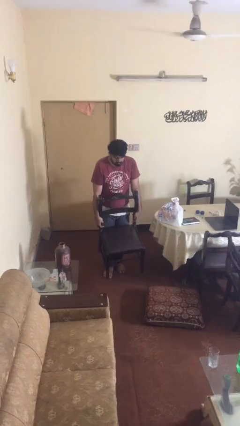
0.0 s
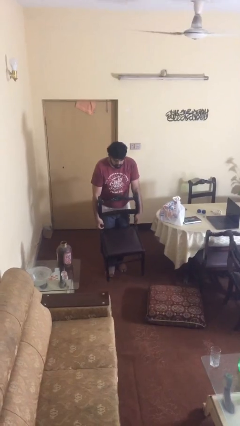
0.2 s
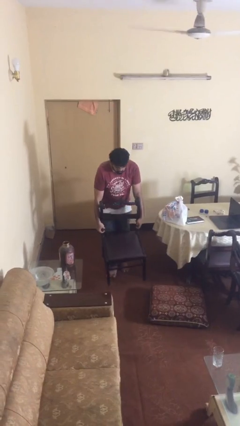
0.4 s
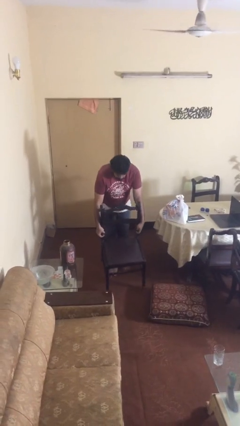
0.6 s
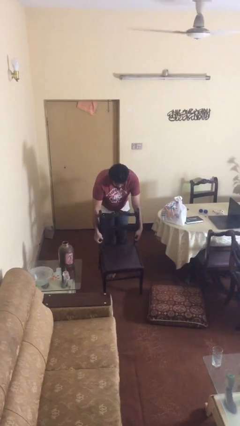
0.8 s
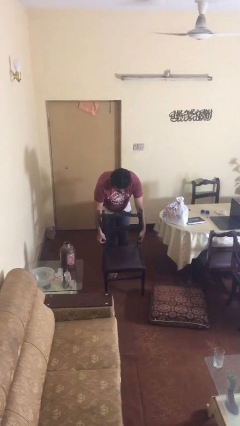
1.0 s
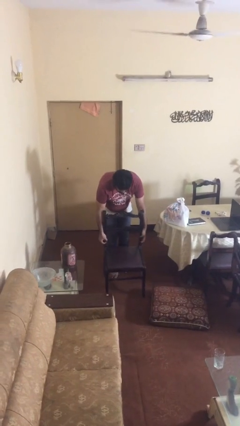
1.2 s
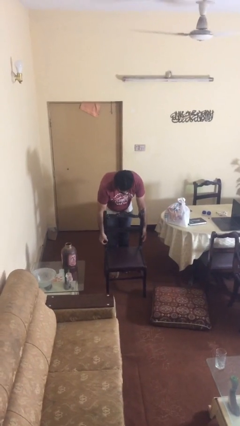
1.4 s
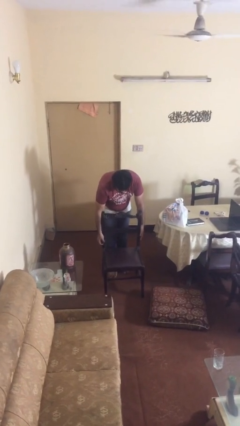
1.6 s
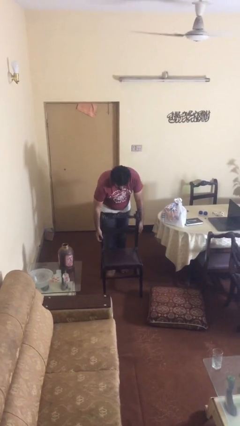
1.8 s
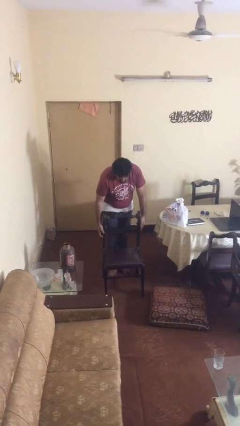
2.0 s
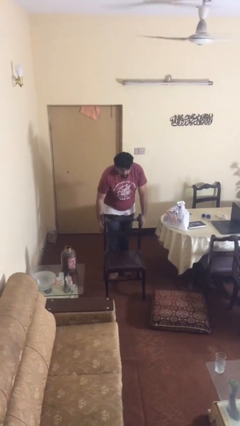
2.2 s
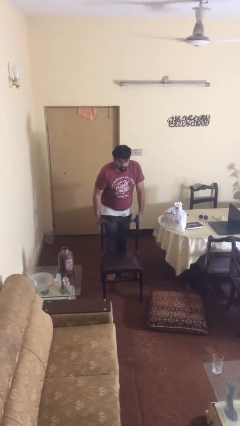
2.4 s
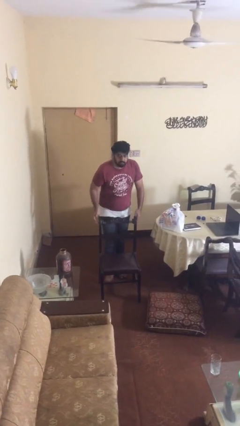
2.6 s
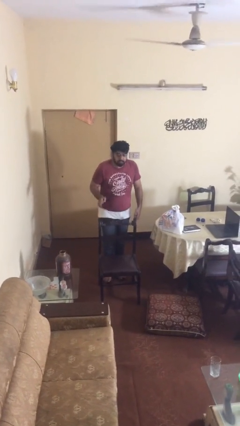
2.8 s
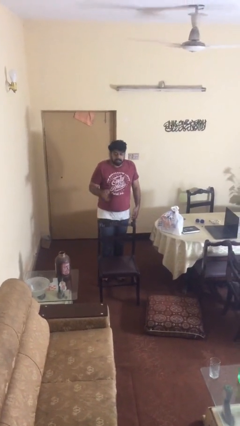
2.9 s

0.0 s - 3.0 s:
person puts down object on floor

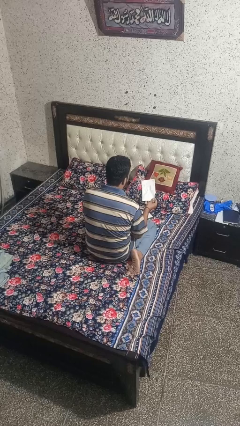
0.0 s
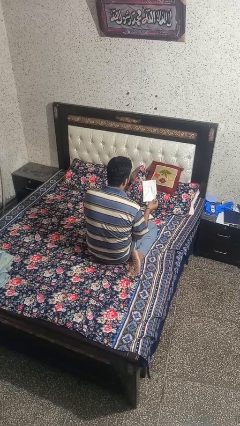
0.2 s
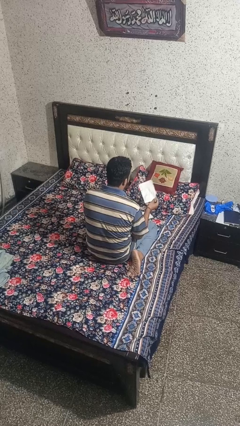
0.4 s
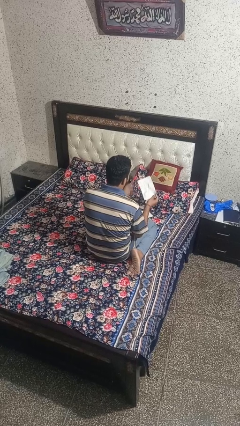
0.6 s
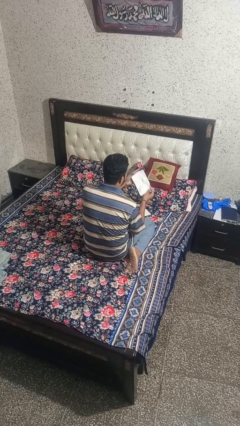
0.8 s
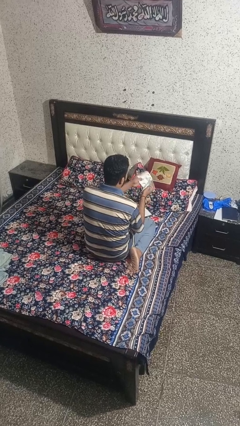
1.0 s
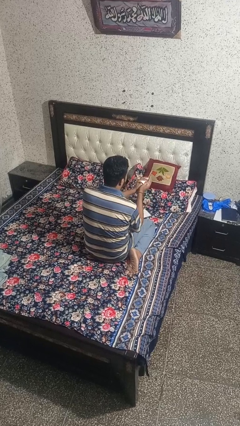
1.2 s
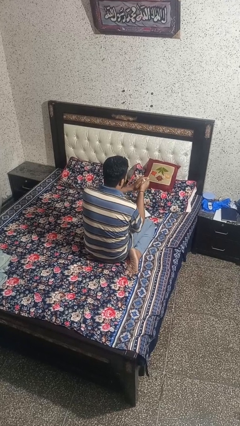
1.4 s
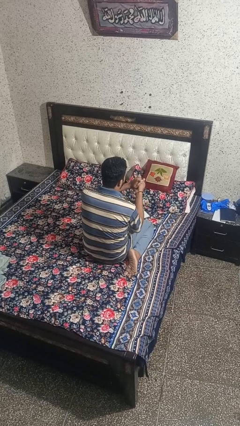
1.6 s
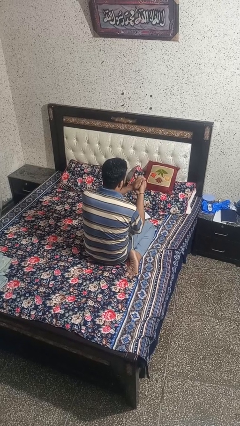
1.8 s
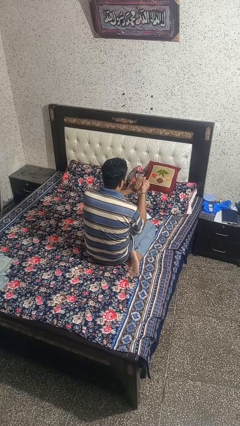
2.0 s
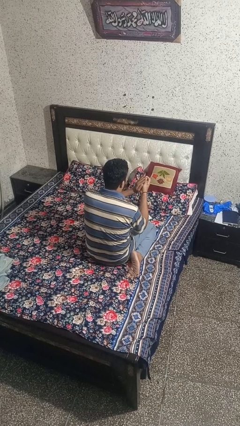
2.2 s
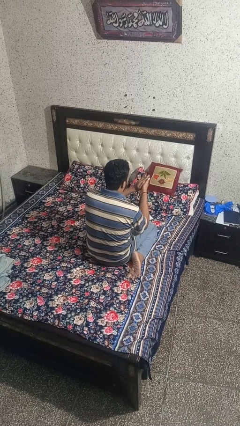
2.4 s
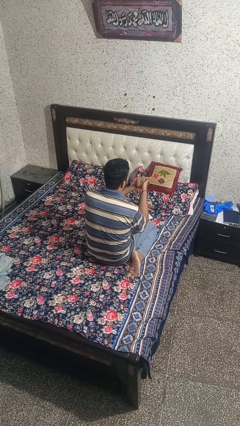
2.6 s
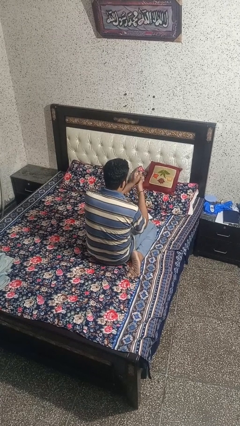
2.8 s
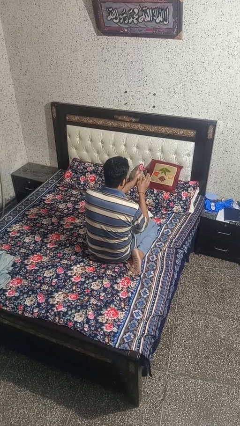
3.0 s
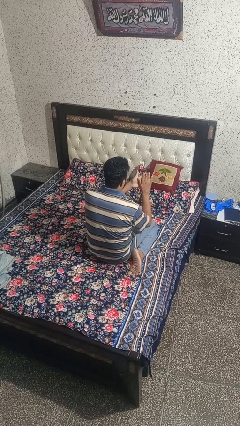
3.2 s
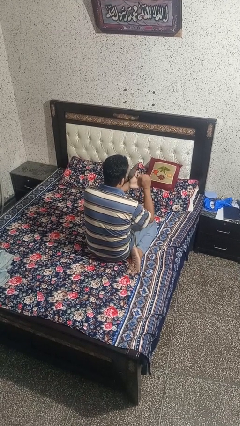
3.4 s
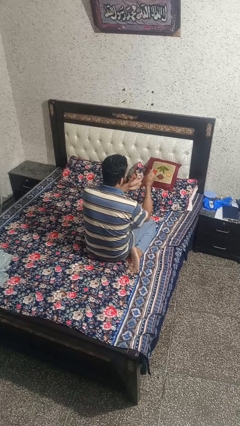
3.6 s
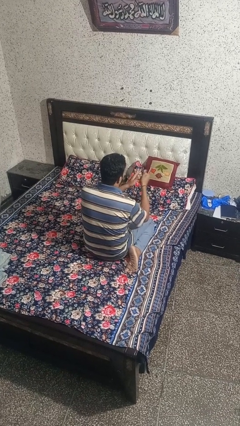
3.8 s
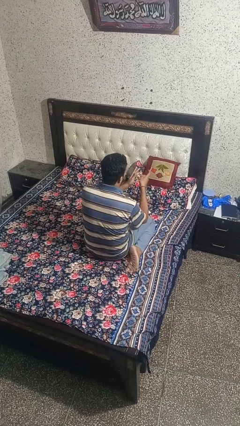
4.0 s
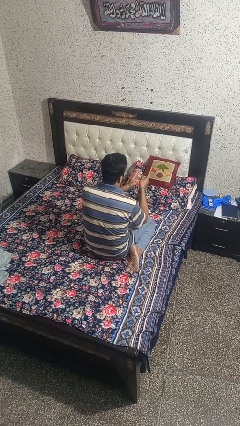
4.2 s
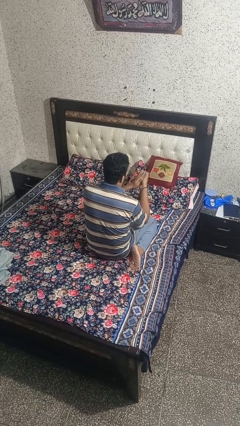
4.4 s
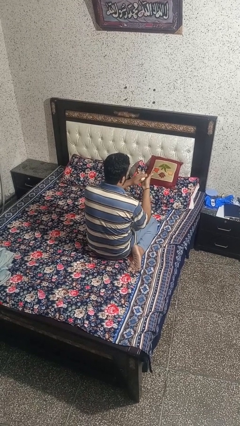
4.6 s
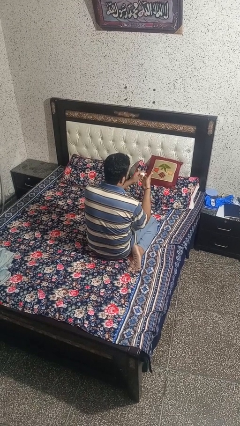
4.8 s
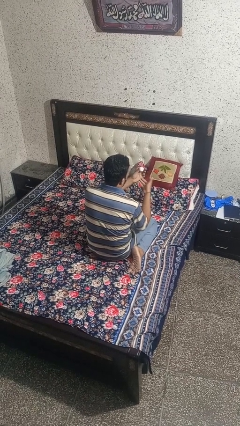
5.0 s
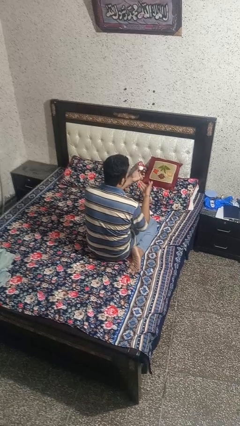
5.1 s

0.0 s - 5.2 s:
person crumples paper

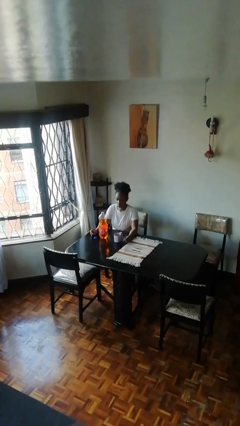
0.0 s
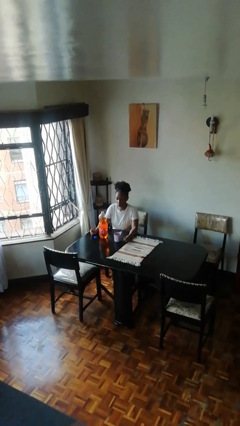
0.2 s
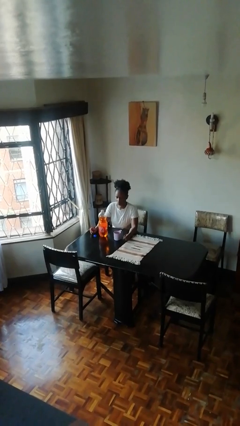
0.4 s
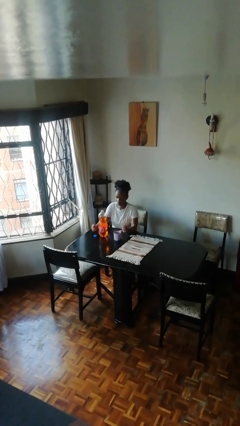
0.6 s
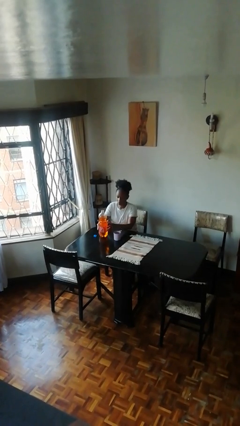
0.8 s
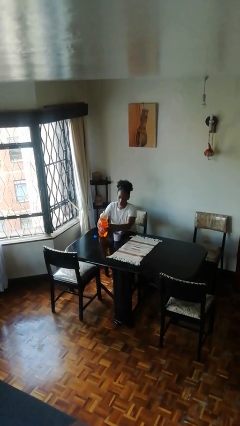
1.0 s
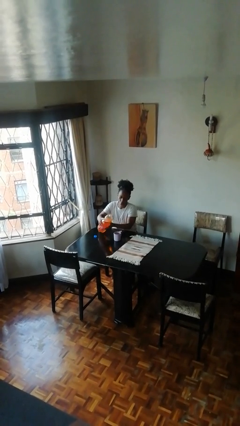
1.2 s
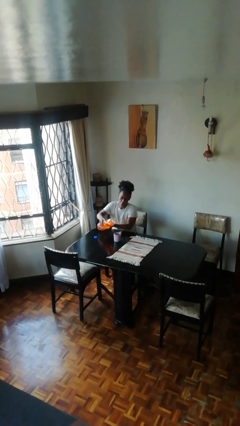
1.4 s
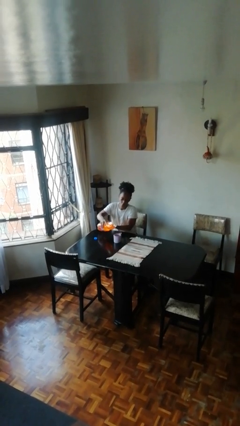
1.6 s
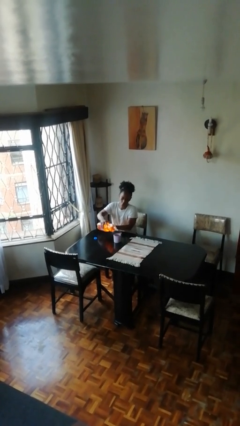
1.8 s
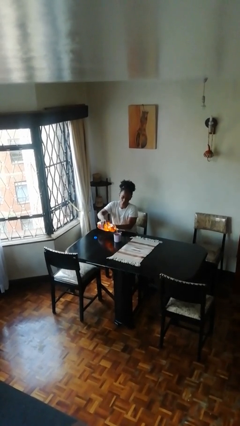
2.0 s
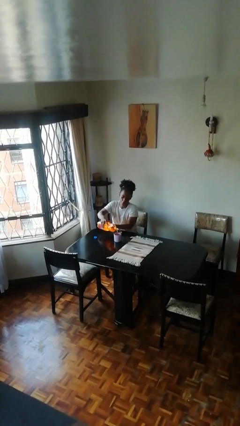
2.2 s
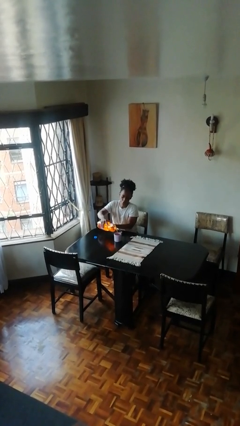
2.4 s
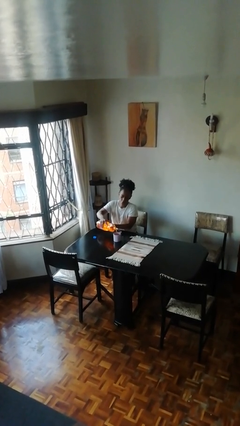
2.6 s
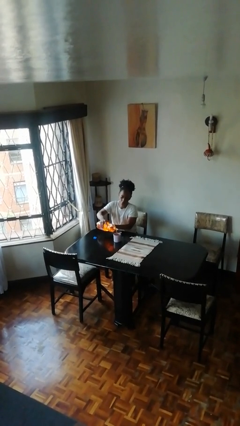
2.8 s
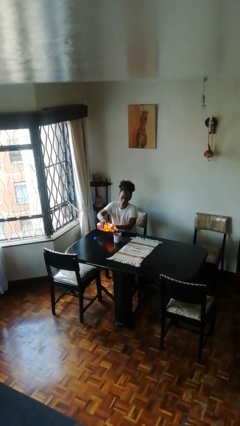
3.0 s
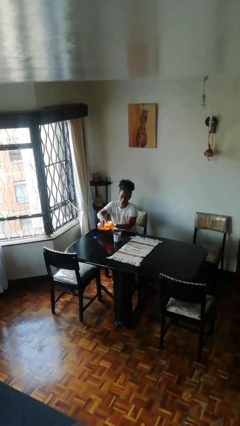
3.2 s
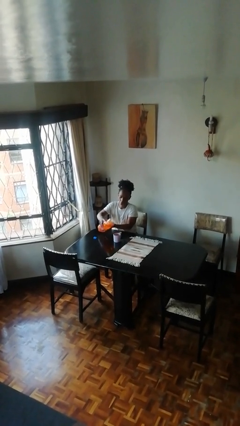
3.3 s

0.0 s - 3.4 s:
person pours liquid into cup

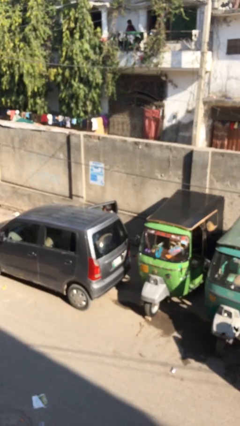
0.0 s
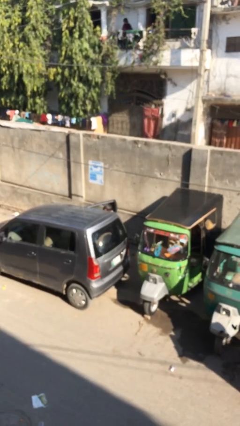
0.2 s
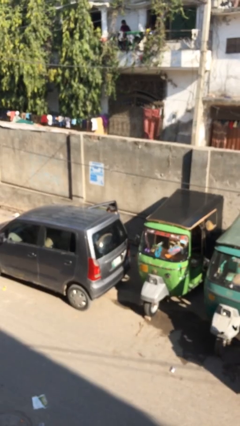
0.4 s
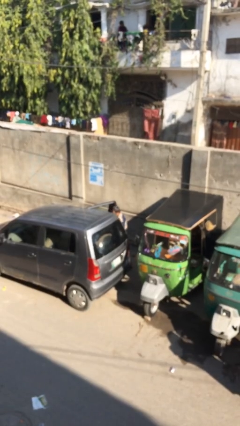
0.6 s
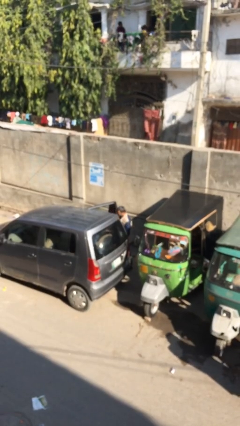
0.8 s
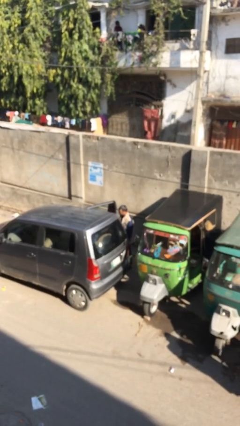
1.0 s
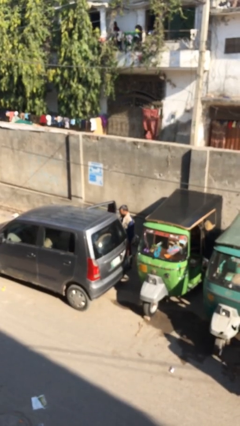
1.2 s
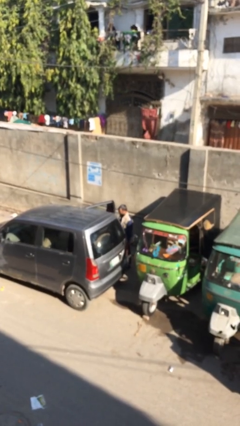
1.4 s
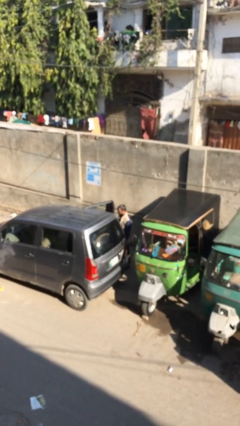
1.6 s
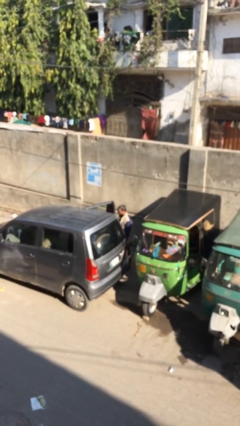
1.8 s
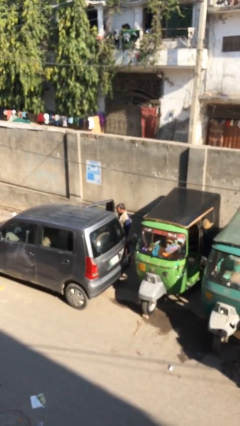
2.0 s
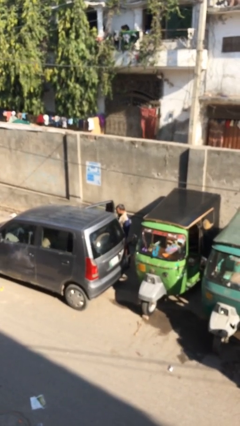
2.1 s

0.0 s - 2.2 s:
person exits car

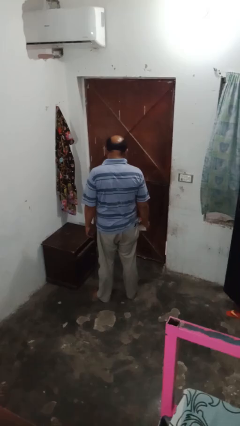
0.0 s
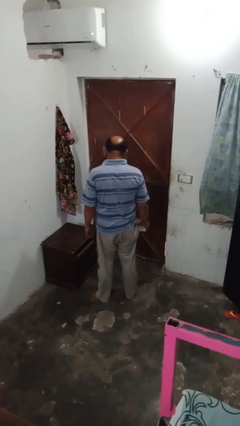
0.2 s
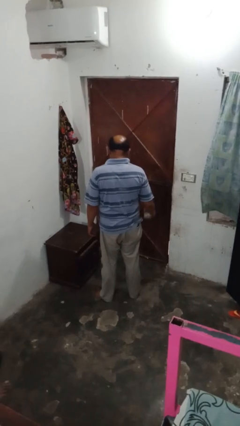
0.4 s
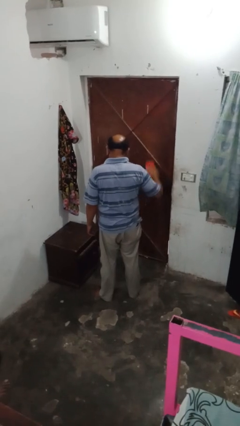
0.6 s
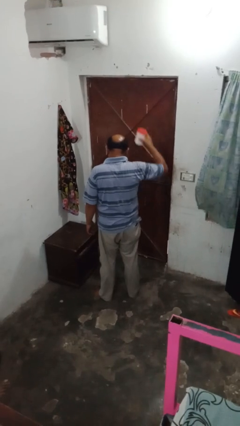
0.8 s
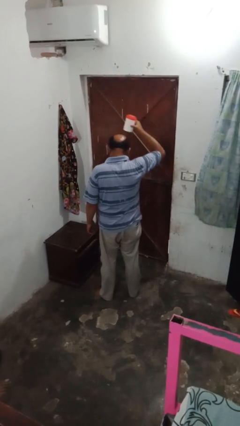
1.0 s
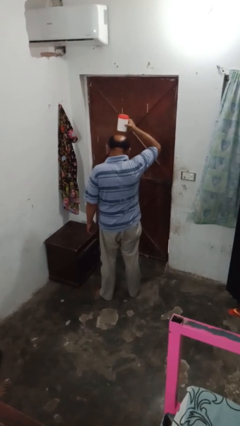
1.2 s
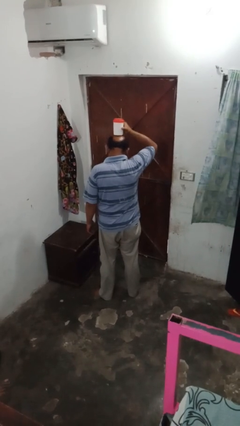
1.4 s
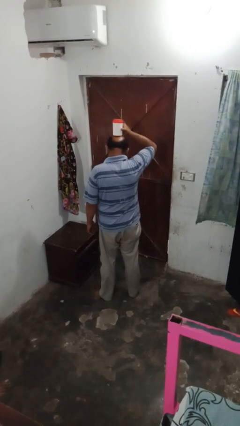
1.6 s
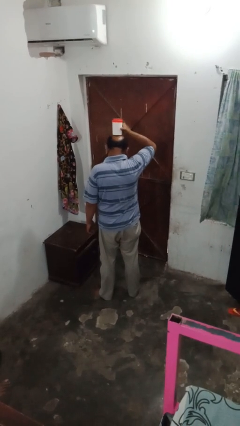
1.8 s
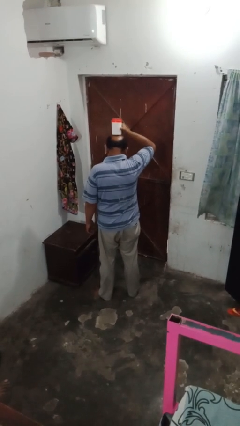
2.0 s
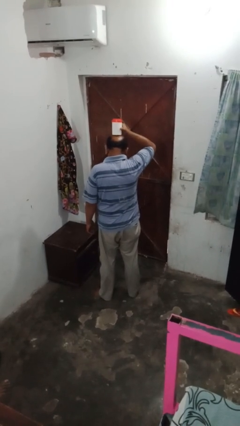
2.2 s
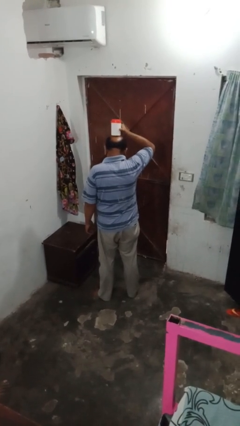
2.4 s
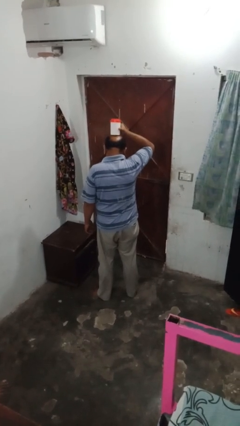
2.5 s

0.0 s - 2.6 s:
person holds object above head

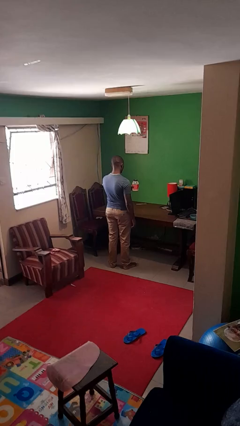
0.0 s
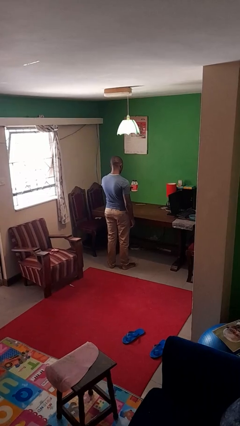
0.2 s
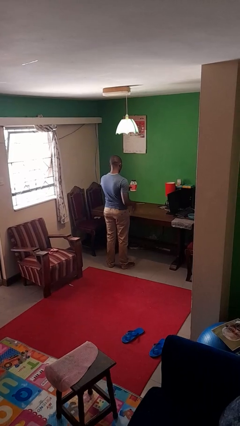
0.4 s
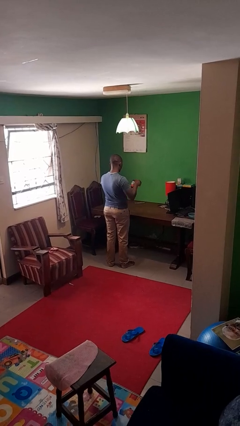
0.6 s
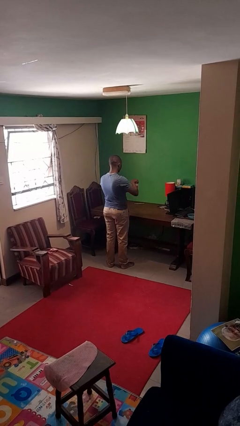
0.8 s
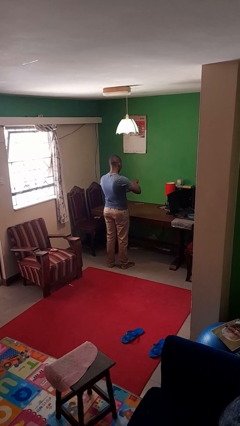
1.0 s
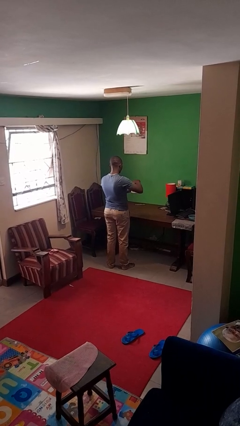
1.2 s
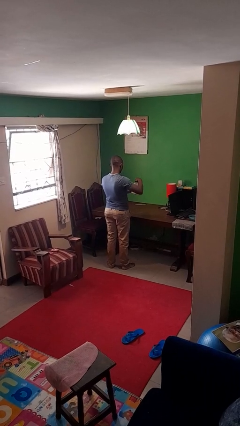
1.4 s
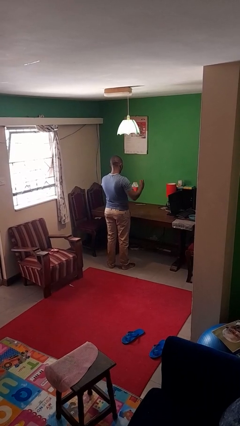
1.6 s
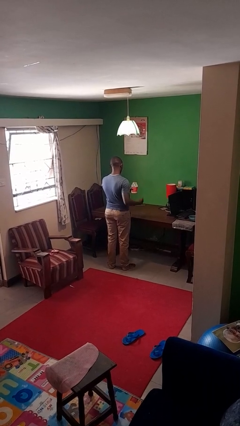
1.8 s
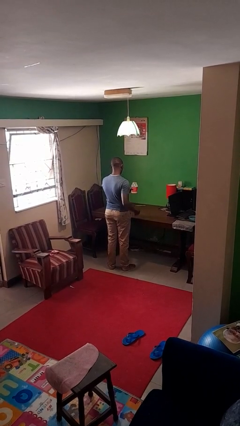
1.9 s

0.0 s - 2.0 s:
person opens jar
